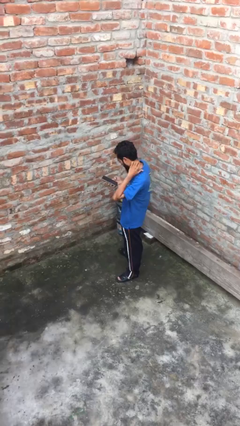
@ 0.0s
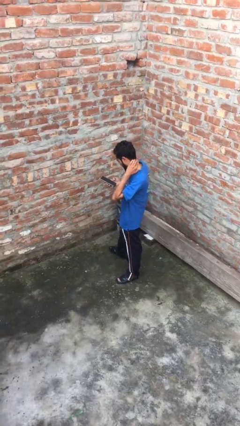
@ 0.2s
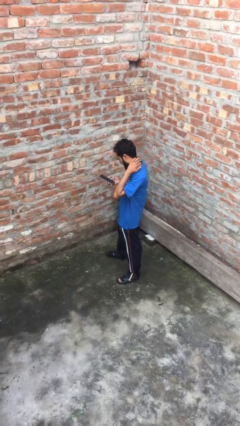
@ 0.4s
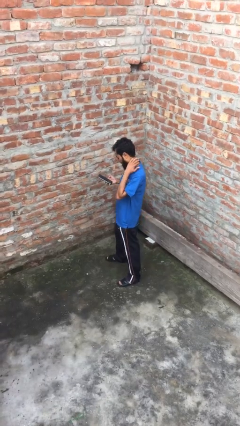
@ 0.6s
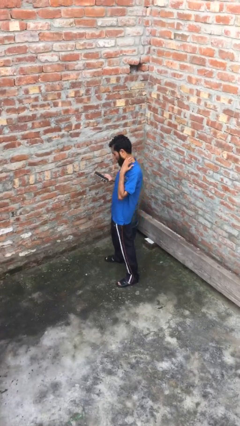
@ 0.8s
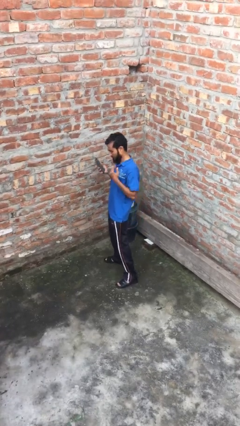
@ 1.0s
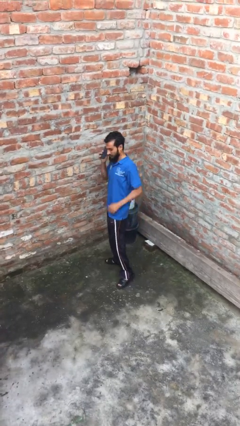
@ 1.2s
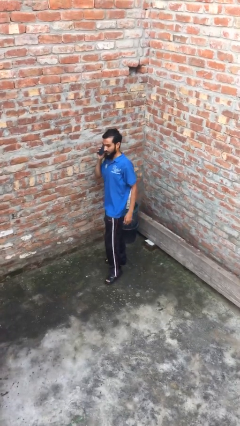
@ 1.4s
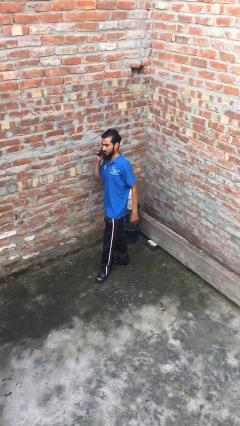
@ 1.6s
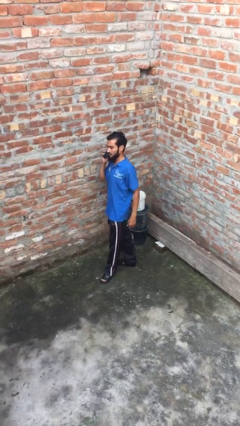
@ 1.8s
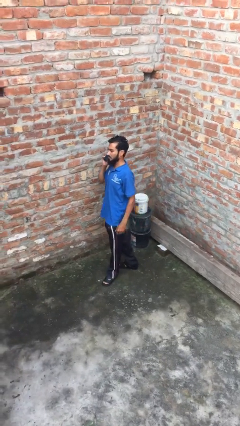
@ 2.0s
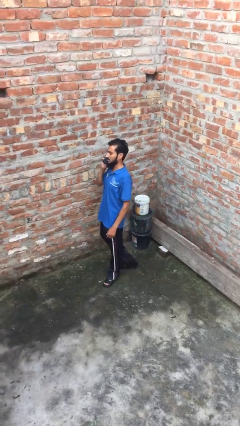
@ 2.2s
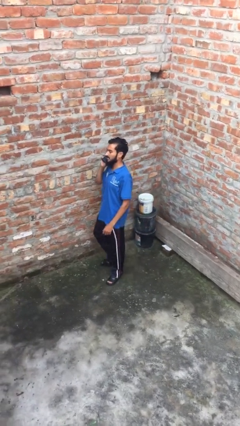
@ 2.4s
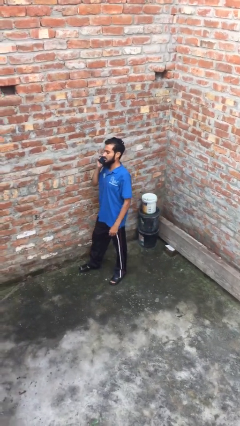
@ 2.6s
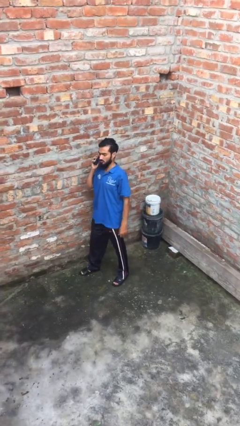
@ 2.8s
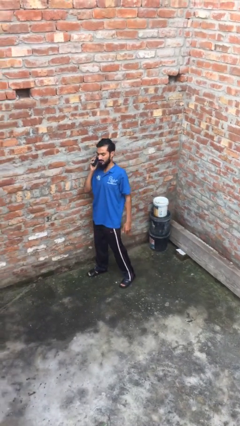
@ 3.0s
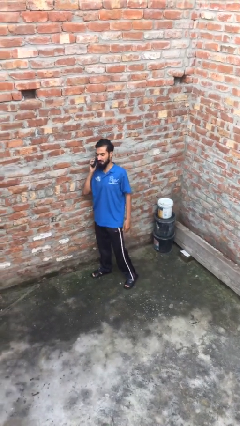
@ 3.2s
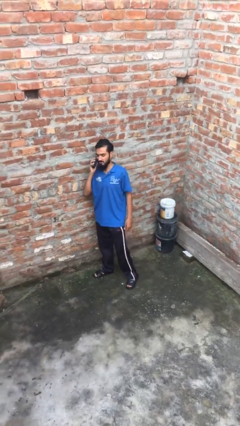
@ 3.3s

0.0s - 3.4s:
person talks on phone

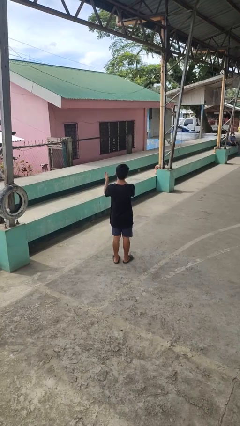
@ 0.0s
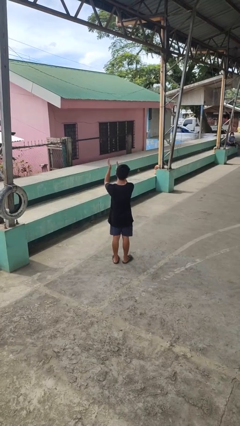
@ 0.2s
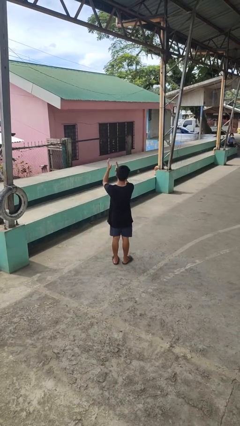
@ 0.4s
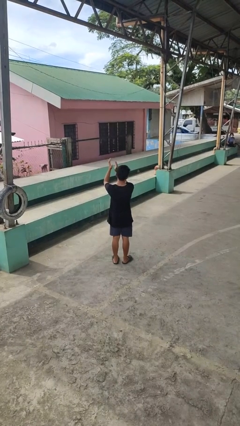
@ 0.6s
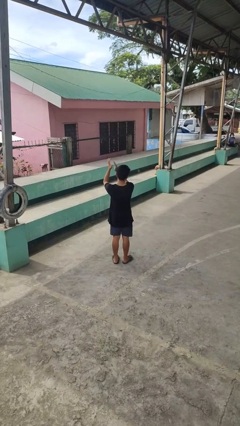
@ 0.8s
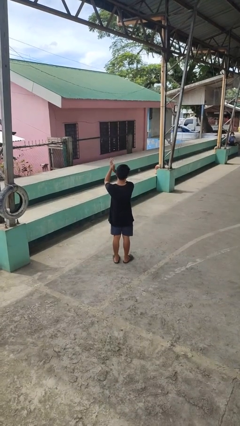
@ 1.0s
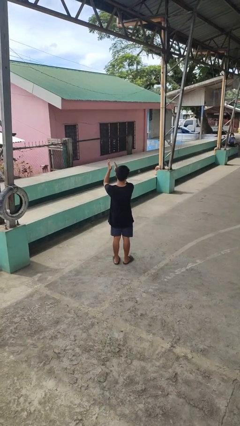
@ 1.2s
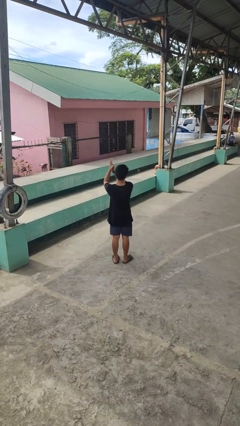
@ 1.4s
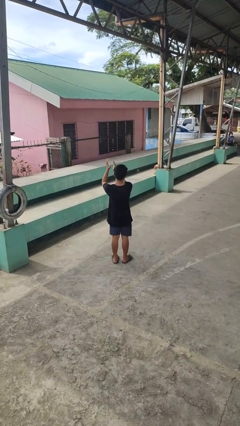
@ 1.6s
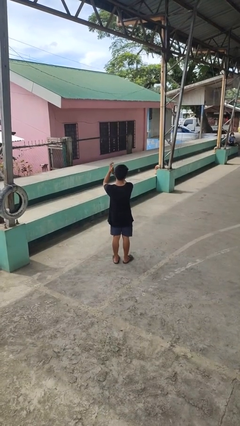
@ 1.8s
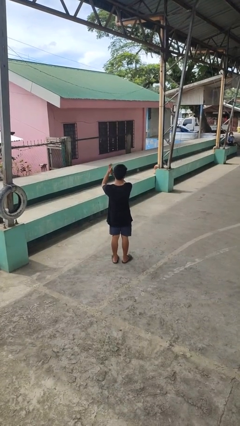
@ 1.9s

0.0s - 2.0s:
person claps hands

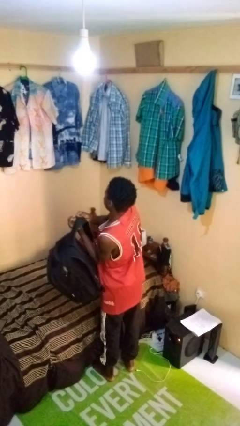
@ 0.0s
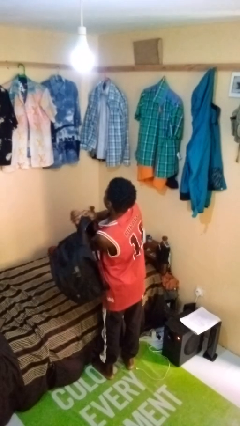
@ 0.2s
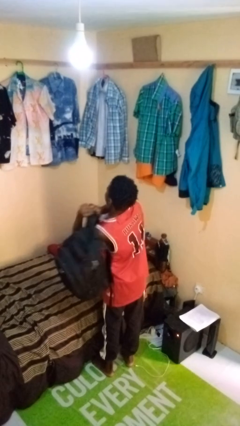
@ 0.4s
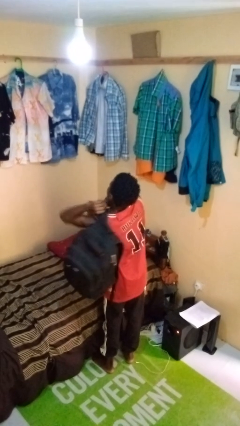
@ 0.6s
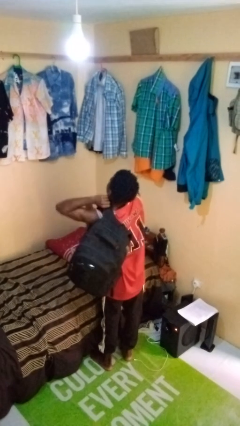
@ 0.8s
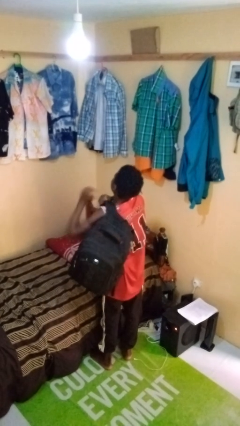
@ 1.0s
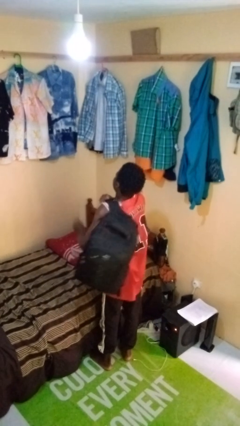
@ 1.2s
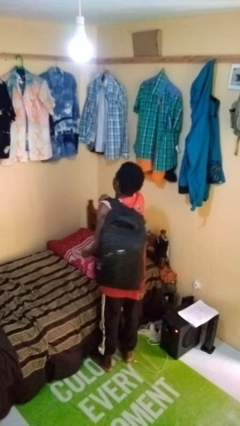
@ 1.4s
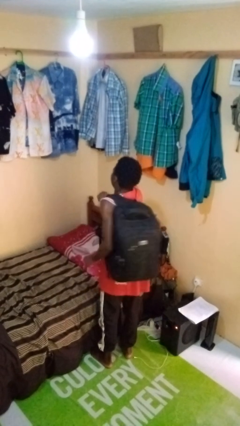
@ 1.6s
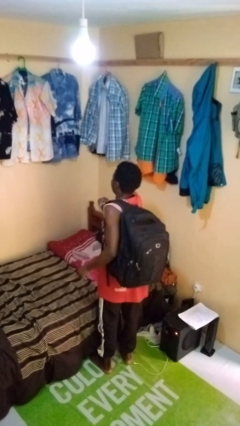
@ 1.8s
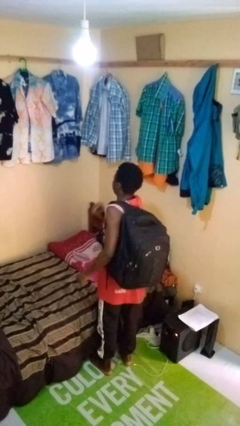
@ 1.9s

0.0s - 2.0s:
person puts on backpack

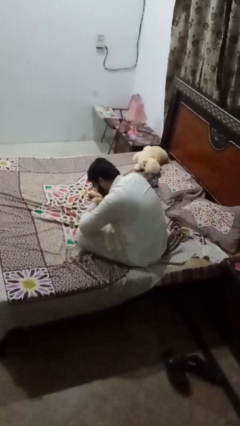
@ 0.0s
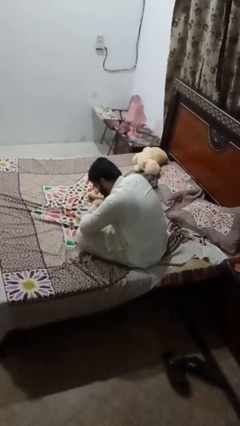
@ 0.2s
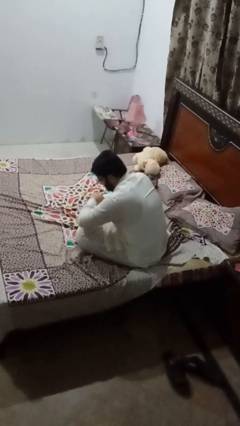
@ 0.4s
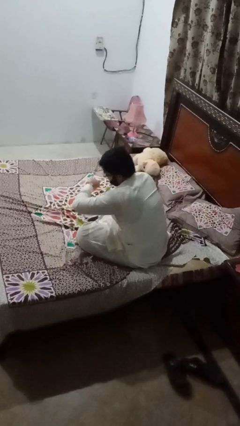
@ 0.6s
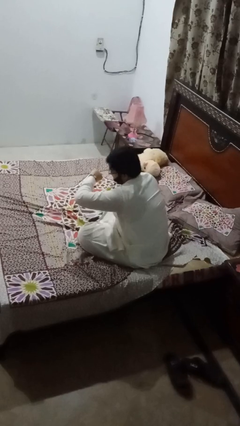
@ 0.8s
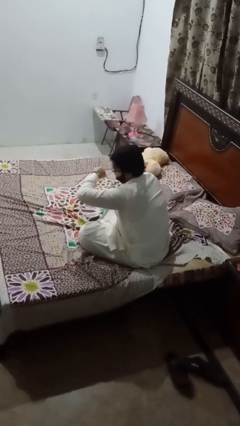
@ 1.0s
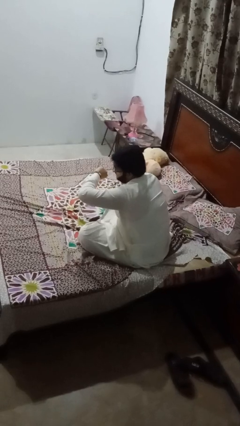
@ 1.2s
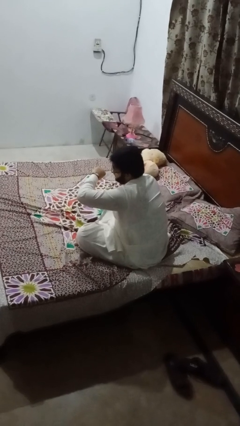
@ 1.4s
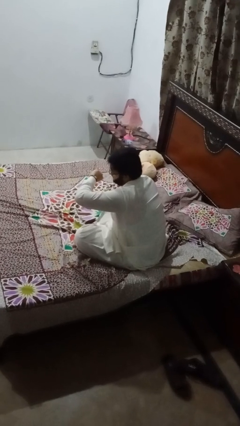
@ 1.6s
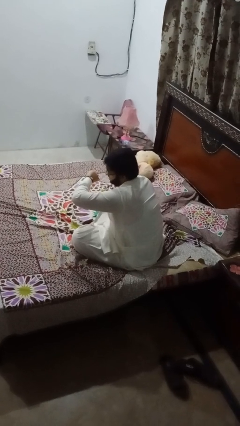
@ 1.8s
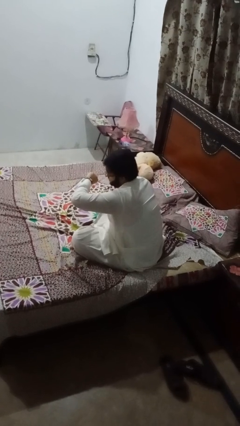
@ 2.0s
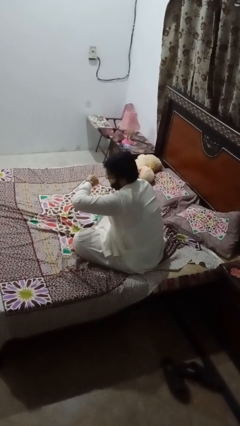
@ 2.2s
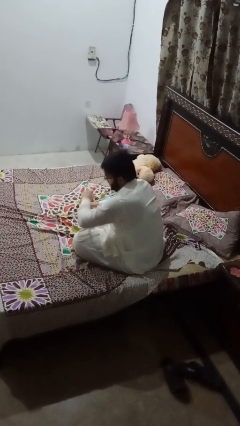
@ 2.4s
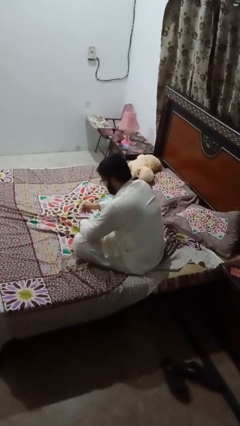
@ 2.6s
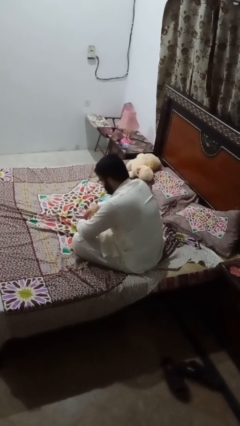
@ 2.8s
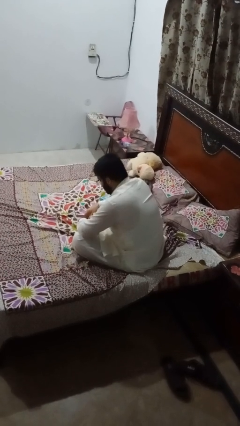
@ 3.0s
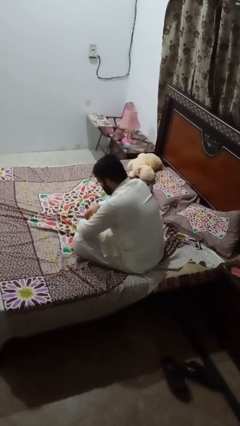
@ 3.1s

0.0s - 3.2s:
person looks at wristwatch

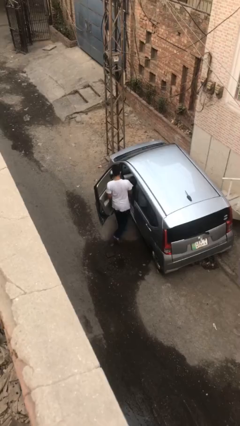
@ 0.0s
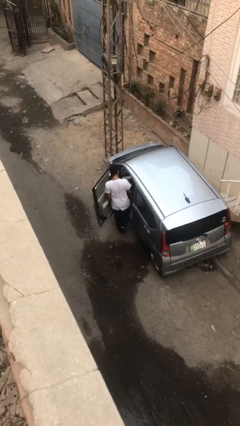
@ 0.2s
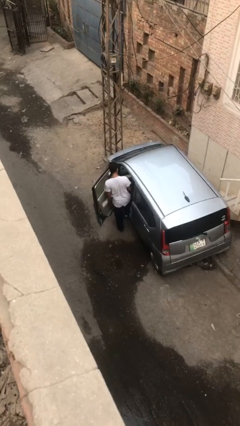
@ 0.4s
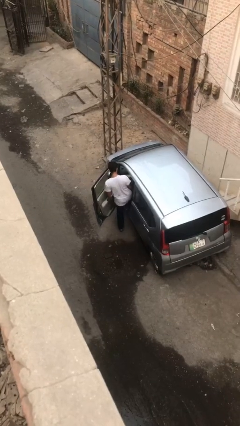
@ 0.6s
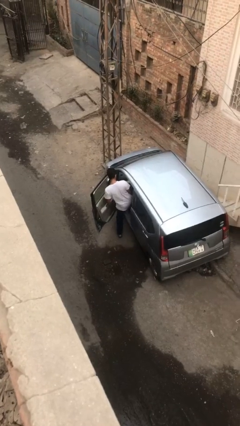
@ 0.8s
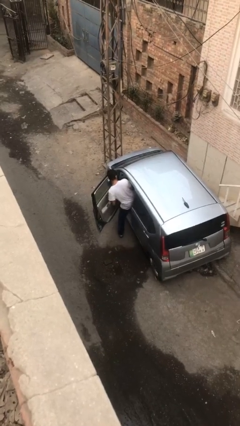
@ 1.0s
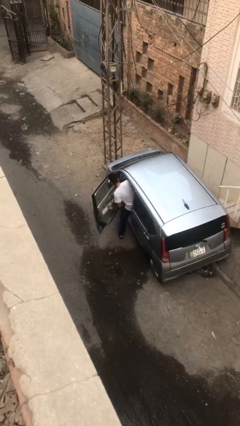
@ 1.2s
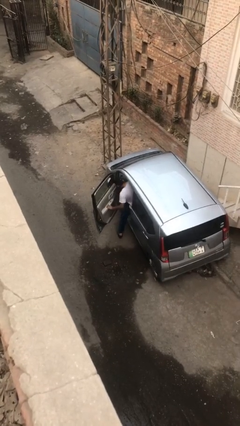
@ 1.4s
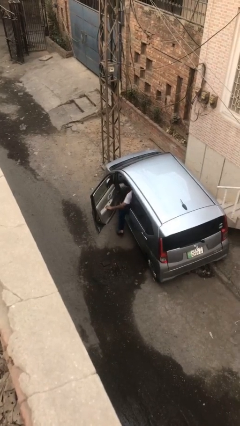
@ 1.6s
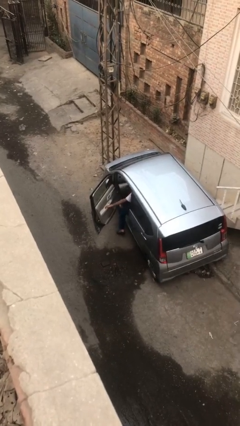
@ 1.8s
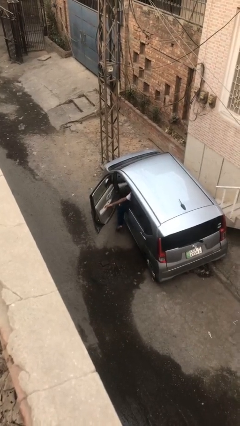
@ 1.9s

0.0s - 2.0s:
person enters car

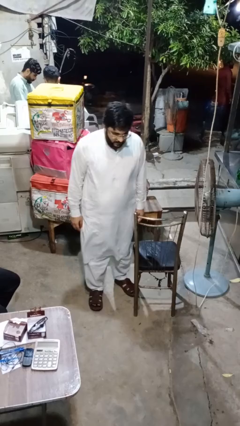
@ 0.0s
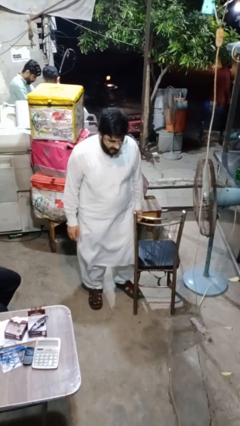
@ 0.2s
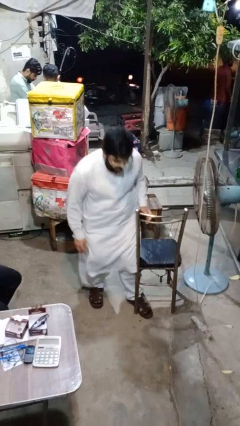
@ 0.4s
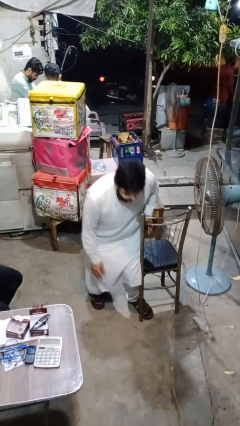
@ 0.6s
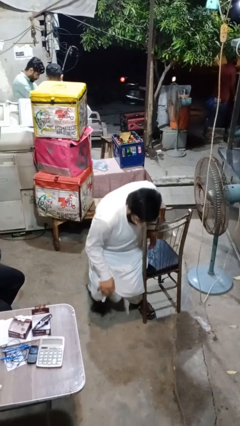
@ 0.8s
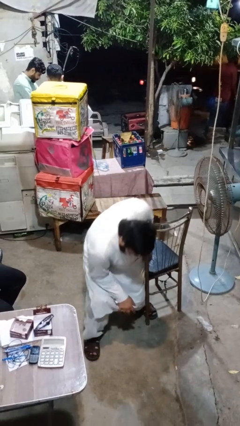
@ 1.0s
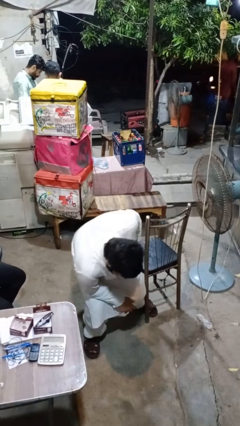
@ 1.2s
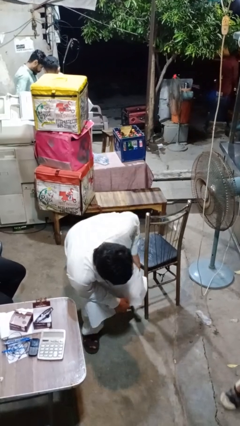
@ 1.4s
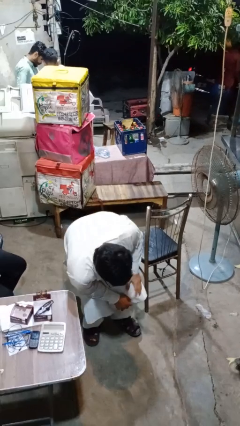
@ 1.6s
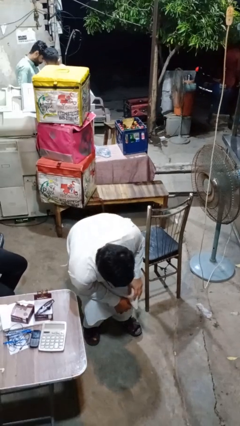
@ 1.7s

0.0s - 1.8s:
person lies down on floor

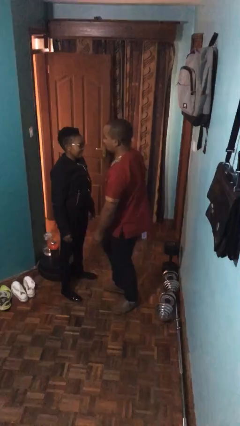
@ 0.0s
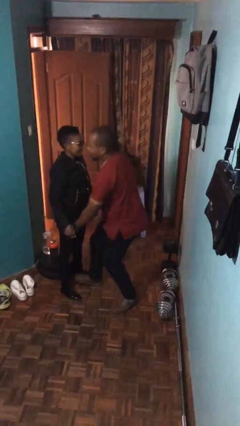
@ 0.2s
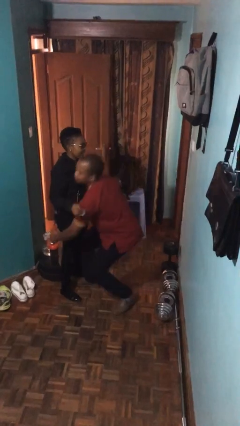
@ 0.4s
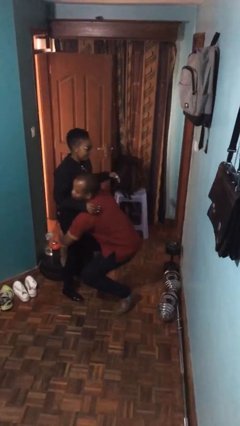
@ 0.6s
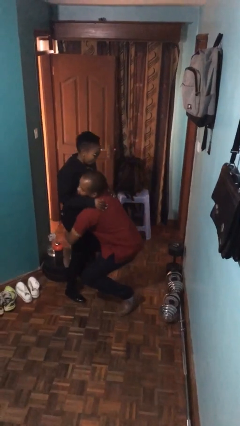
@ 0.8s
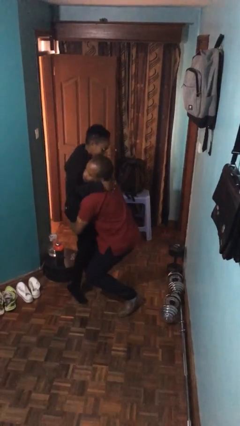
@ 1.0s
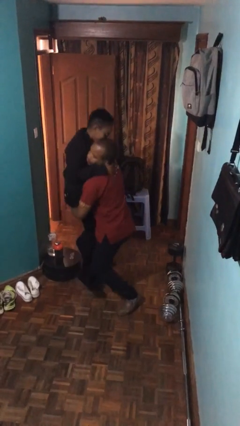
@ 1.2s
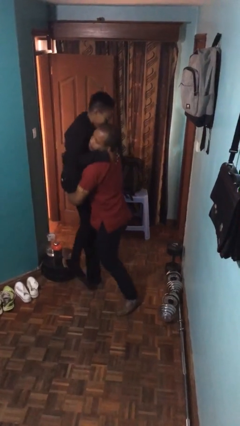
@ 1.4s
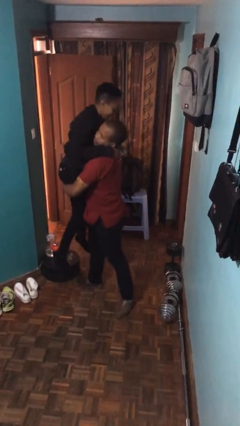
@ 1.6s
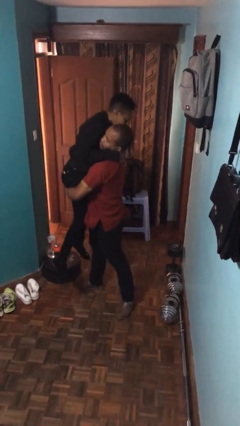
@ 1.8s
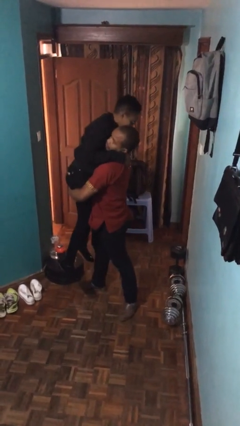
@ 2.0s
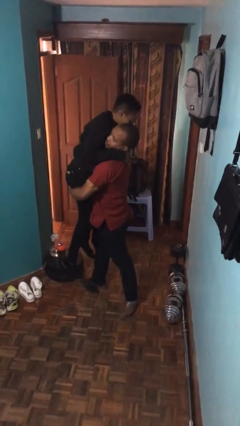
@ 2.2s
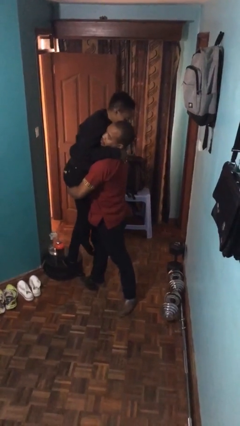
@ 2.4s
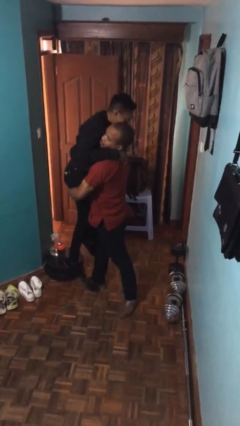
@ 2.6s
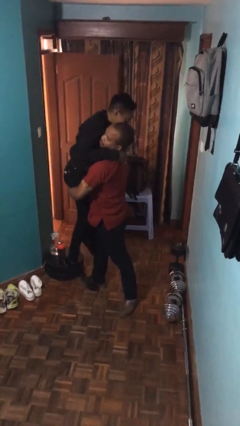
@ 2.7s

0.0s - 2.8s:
person picks up person
